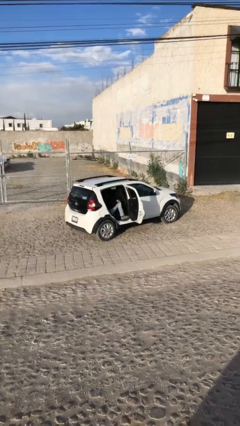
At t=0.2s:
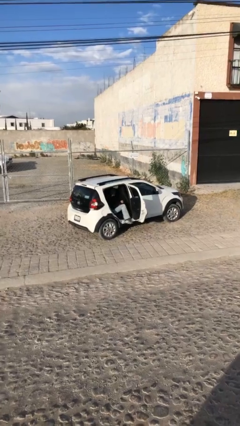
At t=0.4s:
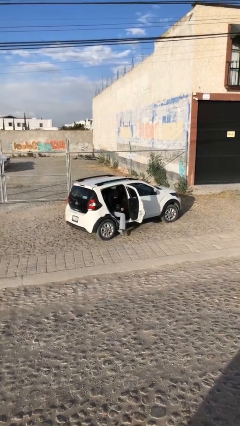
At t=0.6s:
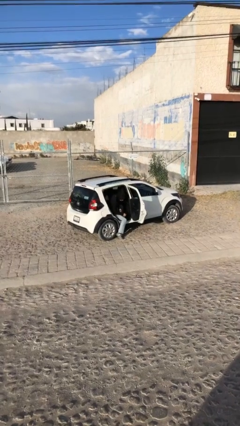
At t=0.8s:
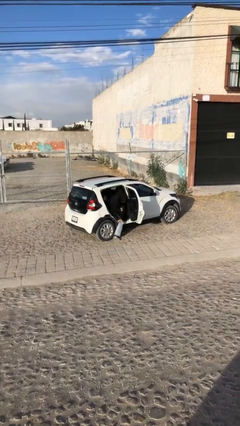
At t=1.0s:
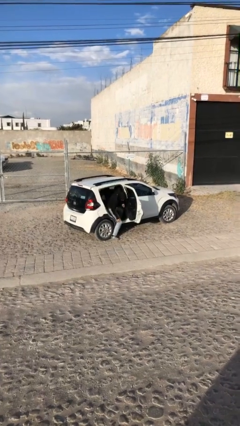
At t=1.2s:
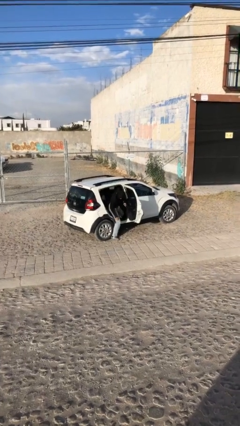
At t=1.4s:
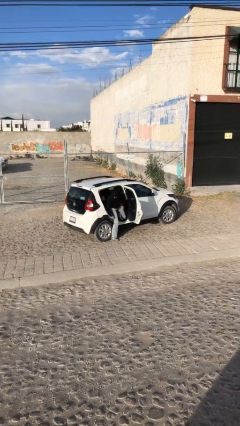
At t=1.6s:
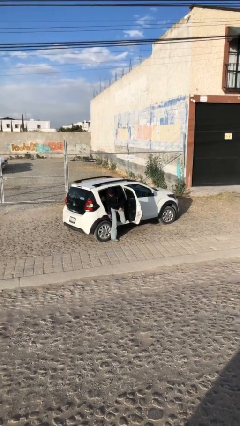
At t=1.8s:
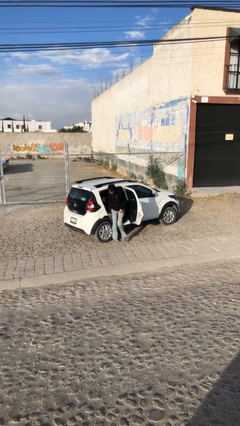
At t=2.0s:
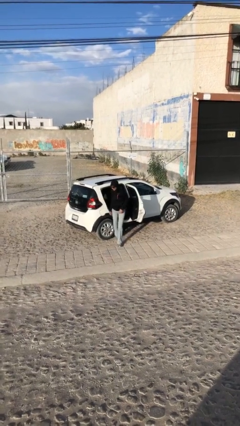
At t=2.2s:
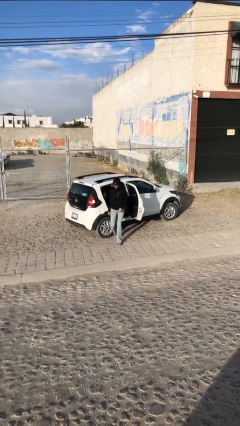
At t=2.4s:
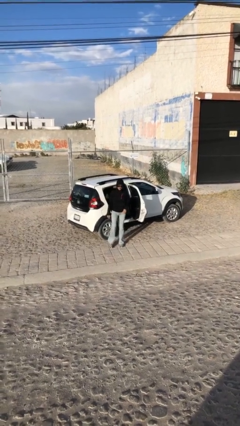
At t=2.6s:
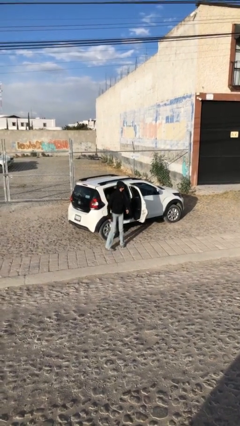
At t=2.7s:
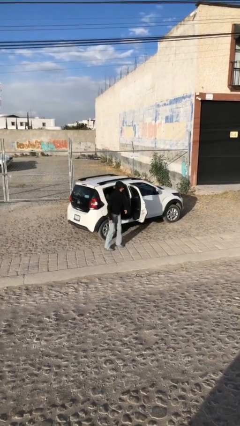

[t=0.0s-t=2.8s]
person exits car

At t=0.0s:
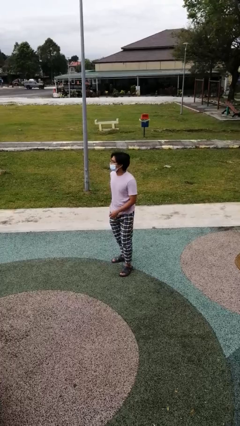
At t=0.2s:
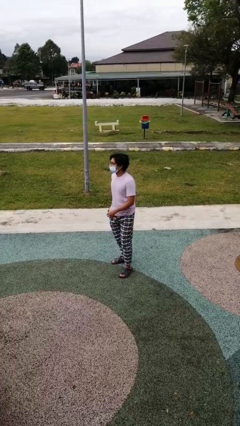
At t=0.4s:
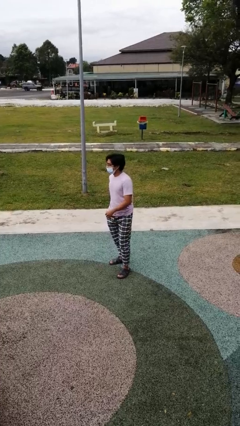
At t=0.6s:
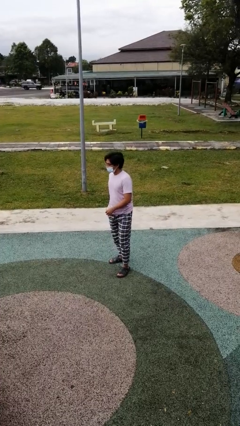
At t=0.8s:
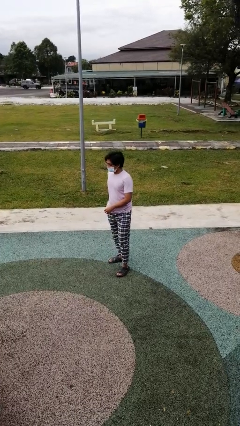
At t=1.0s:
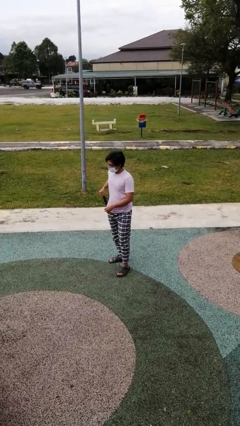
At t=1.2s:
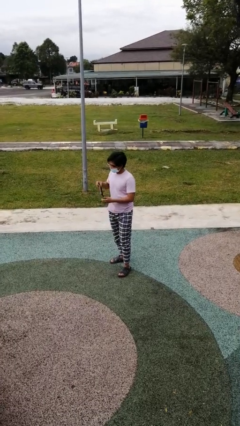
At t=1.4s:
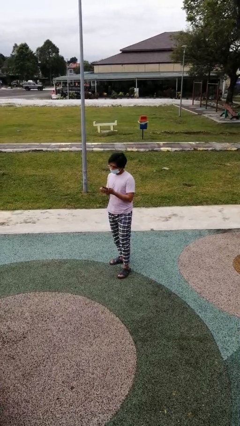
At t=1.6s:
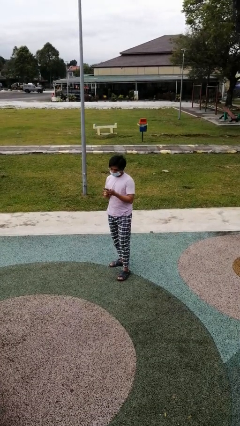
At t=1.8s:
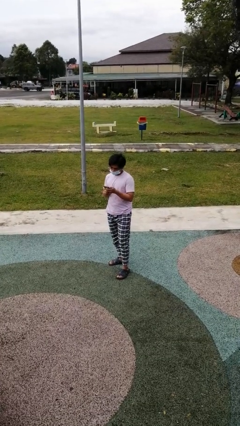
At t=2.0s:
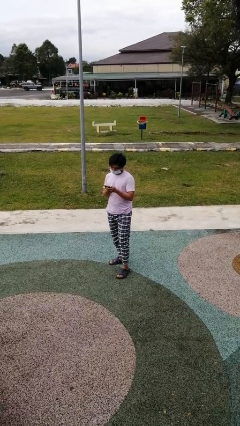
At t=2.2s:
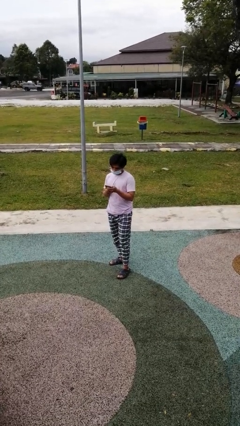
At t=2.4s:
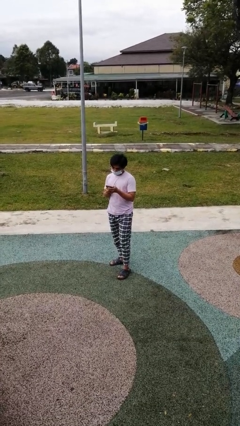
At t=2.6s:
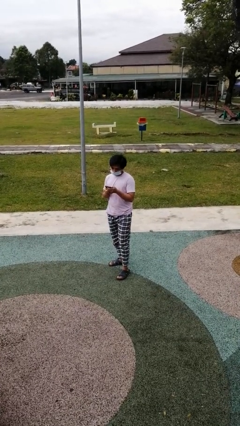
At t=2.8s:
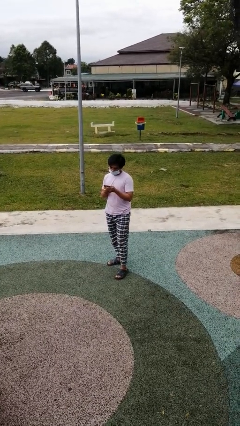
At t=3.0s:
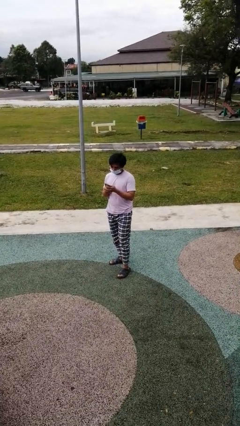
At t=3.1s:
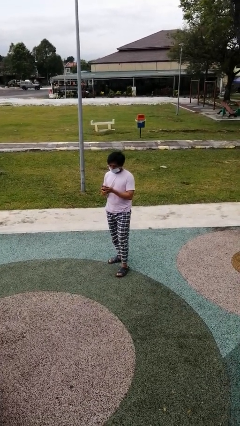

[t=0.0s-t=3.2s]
person takes phone from pocket

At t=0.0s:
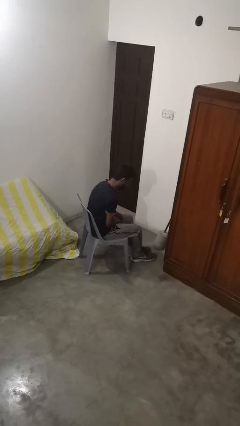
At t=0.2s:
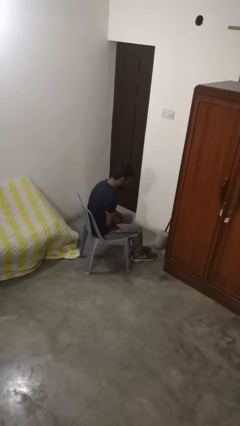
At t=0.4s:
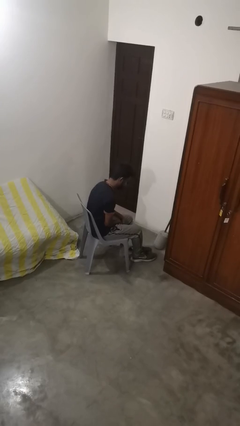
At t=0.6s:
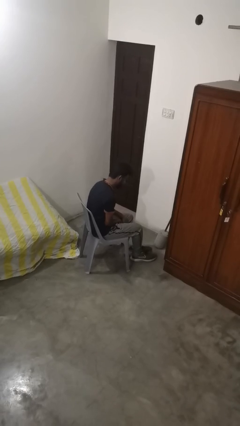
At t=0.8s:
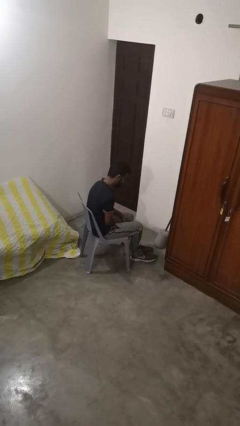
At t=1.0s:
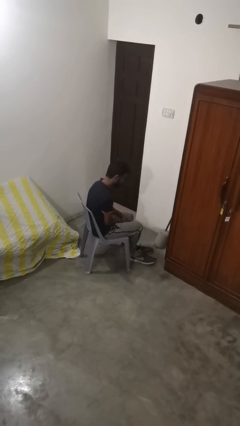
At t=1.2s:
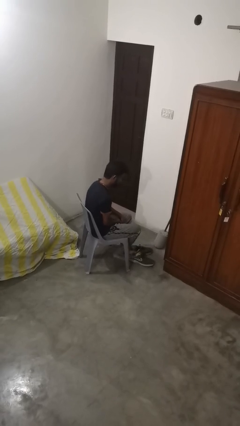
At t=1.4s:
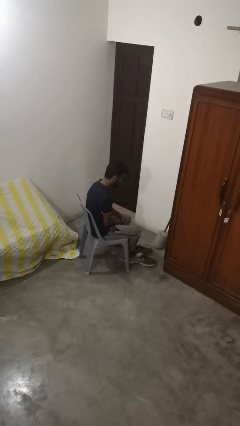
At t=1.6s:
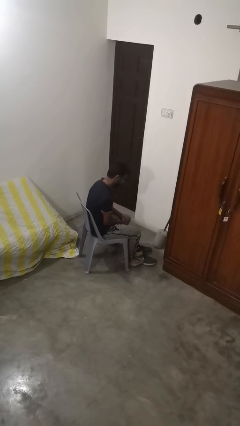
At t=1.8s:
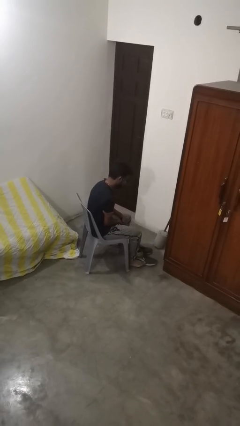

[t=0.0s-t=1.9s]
person takes off shoes

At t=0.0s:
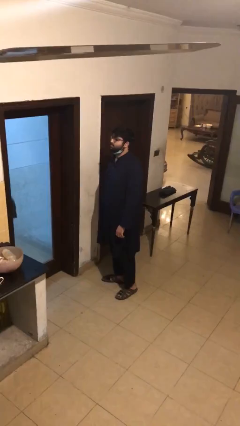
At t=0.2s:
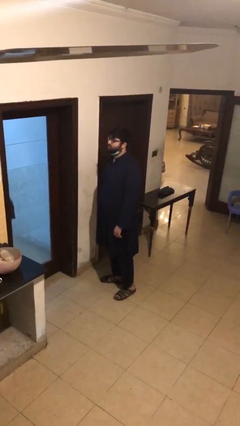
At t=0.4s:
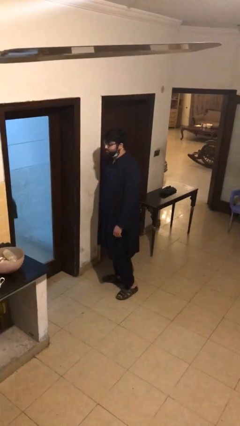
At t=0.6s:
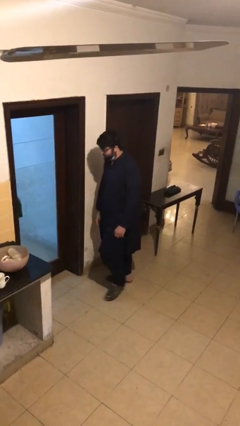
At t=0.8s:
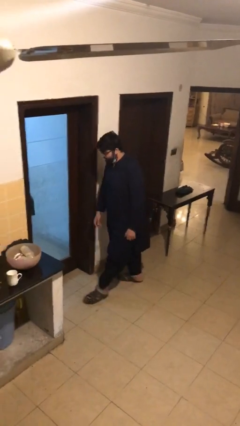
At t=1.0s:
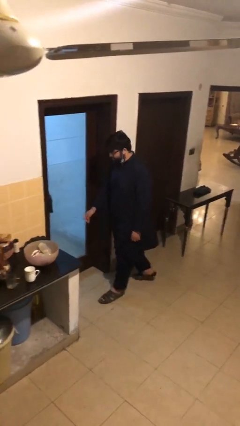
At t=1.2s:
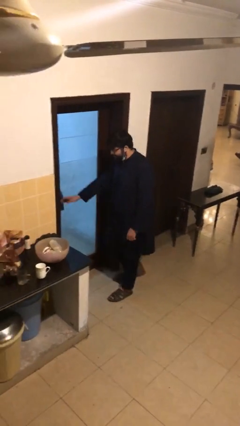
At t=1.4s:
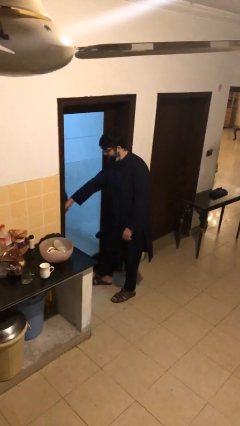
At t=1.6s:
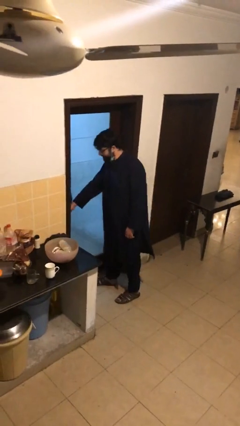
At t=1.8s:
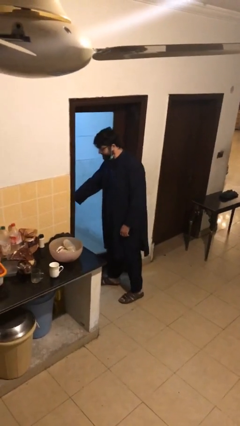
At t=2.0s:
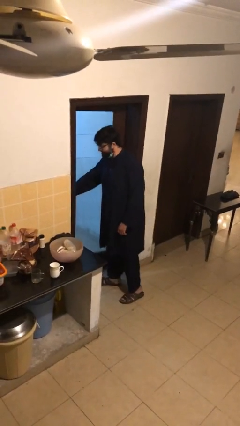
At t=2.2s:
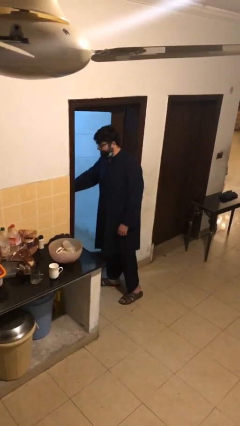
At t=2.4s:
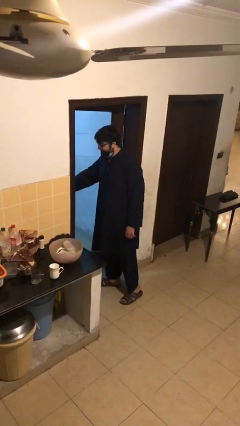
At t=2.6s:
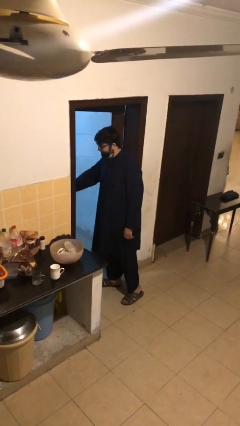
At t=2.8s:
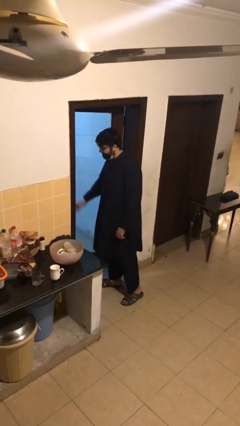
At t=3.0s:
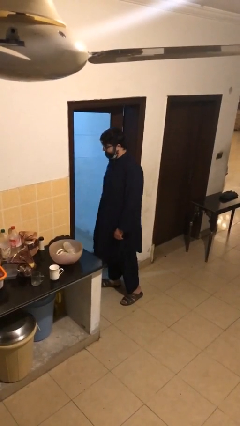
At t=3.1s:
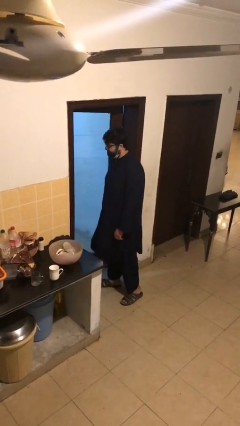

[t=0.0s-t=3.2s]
person opens facility door

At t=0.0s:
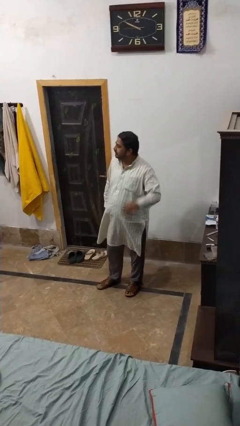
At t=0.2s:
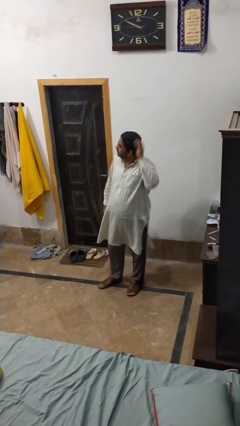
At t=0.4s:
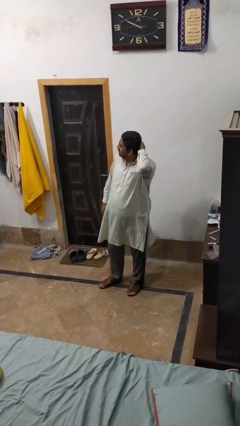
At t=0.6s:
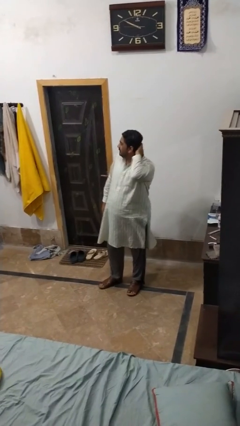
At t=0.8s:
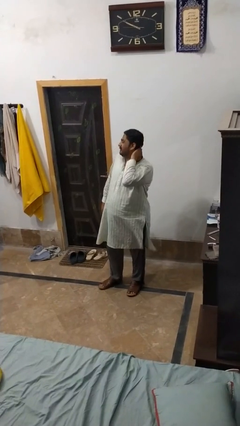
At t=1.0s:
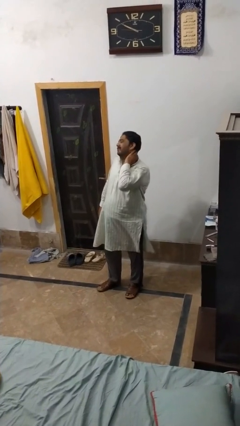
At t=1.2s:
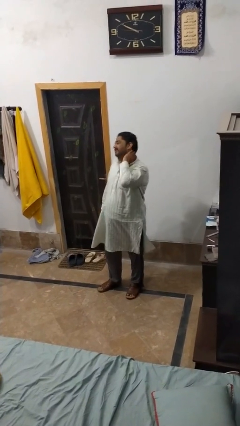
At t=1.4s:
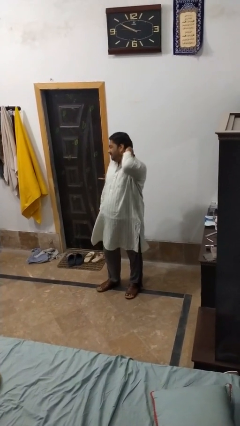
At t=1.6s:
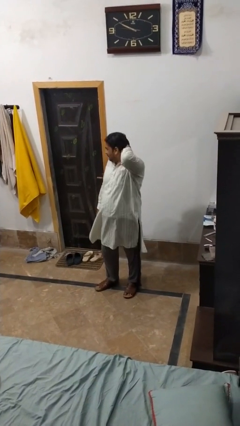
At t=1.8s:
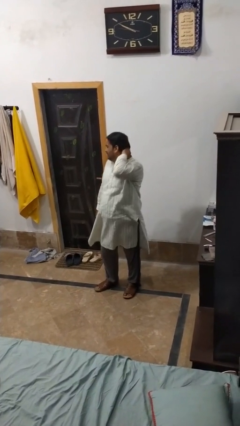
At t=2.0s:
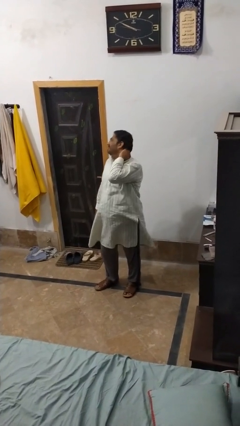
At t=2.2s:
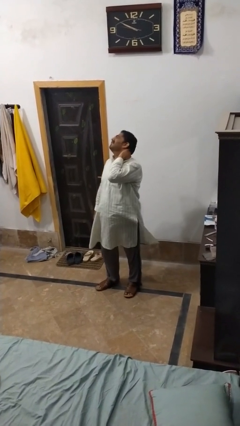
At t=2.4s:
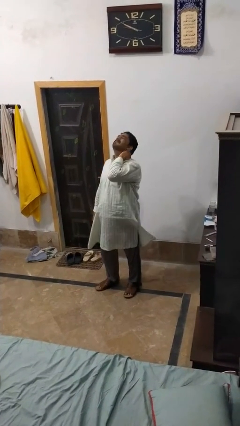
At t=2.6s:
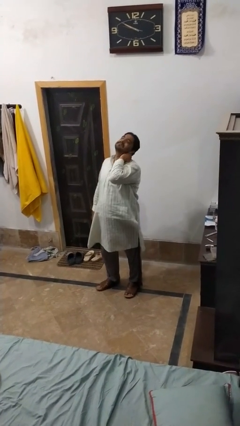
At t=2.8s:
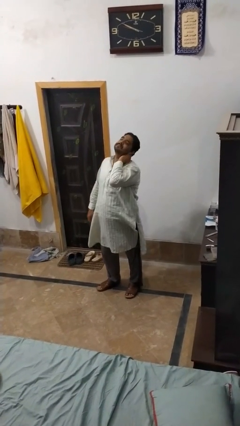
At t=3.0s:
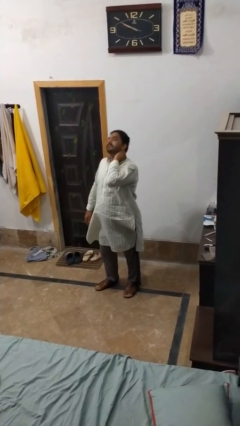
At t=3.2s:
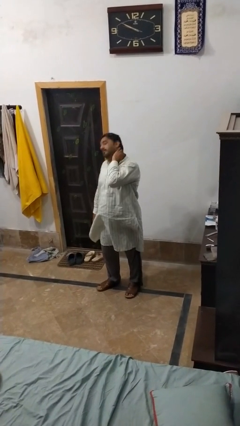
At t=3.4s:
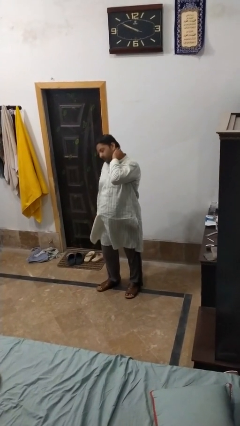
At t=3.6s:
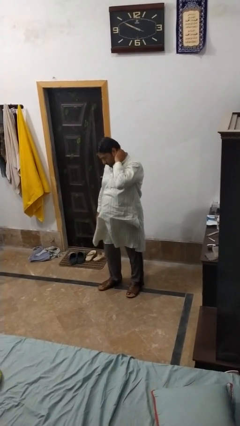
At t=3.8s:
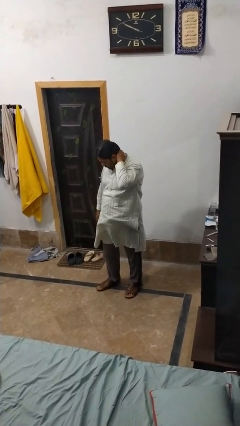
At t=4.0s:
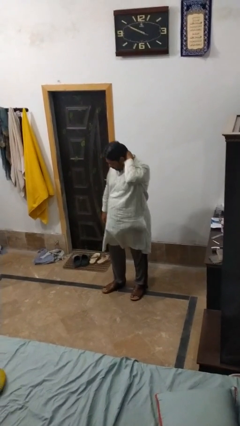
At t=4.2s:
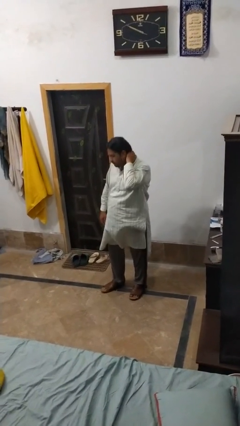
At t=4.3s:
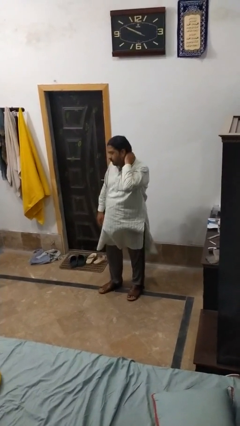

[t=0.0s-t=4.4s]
person rubs neck

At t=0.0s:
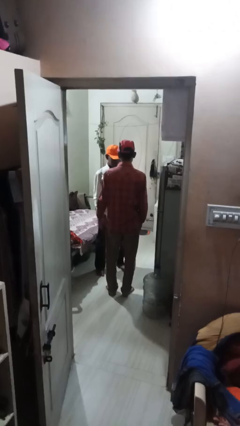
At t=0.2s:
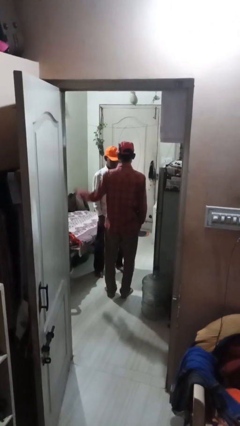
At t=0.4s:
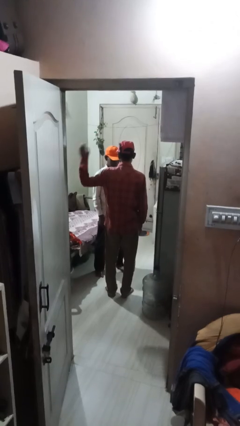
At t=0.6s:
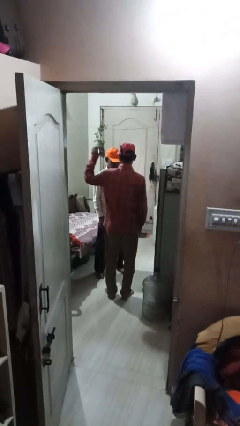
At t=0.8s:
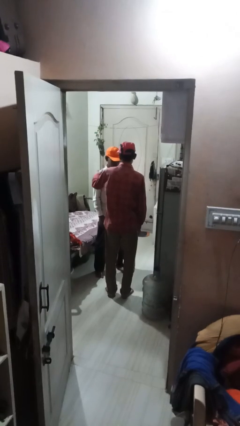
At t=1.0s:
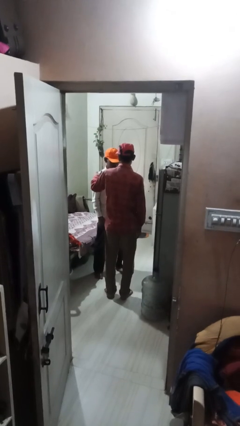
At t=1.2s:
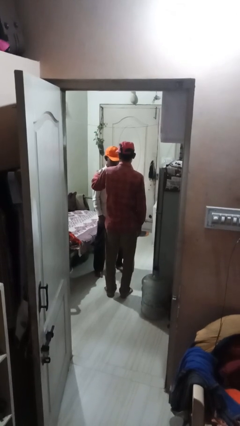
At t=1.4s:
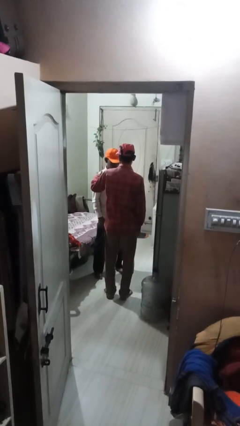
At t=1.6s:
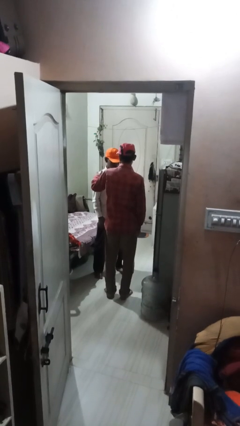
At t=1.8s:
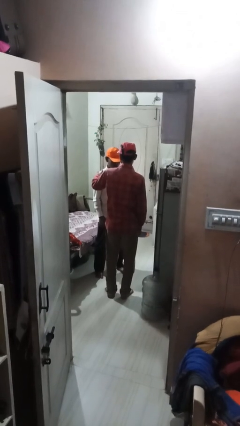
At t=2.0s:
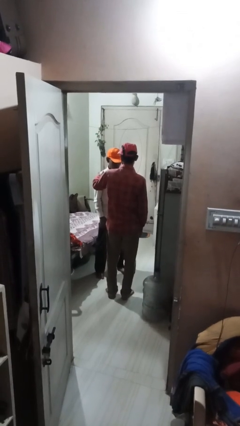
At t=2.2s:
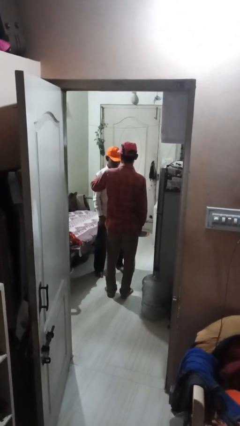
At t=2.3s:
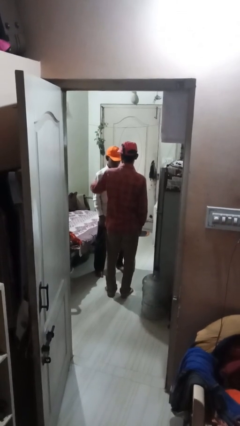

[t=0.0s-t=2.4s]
person pounds shoulders of person
